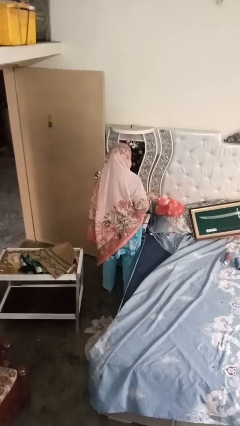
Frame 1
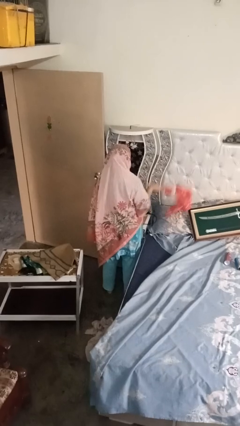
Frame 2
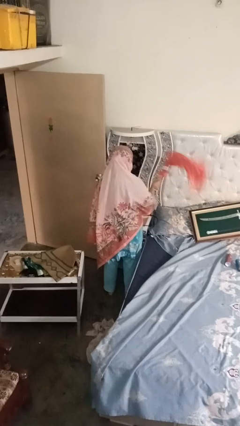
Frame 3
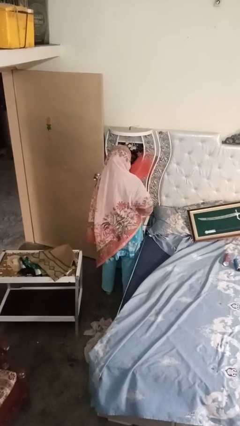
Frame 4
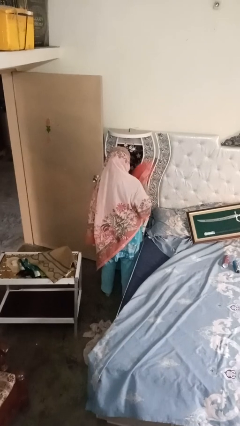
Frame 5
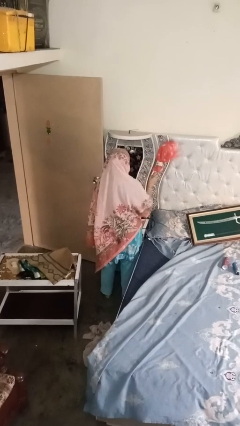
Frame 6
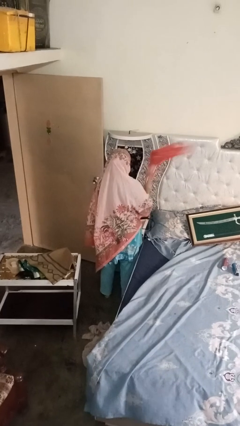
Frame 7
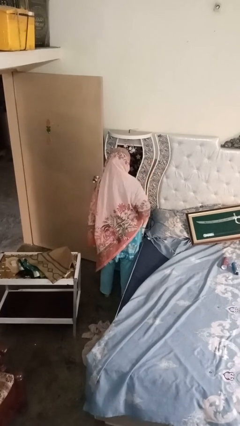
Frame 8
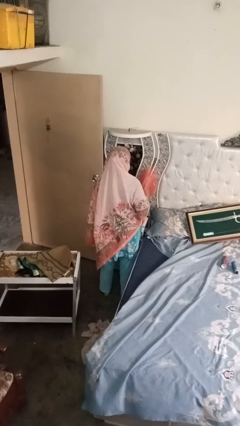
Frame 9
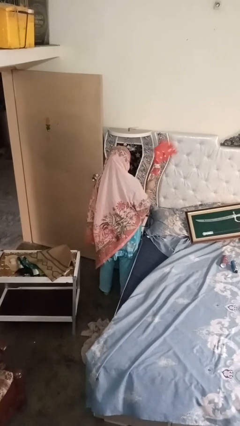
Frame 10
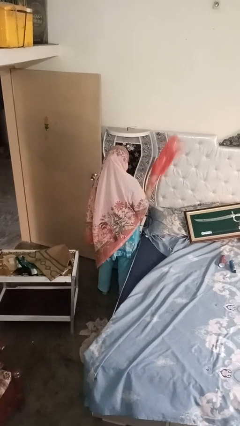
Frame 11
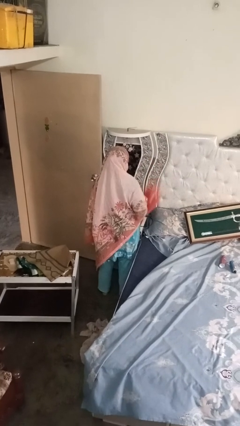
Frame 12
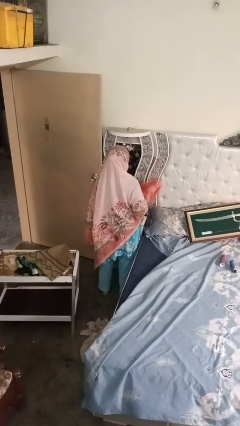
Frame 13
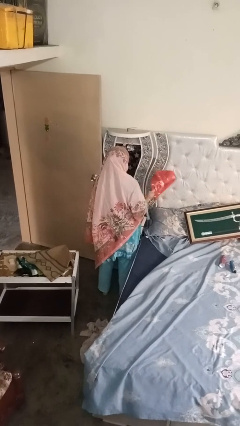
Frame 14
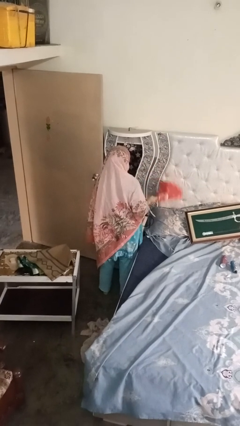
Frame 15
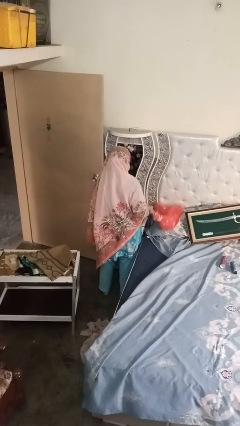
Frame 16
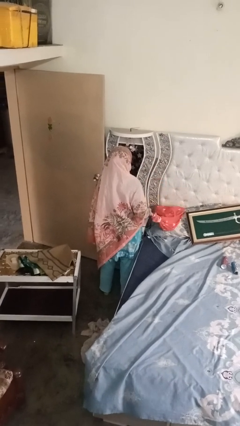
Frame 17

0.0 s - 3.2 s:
person dusts furniture

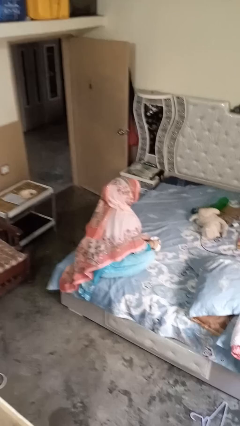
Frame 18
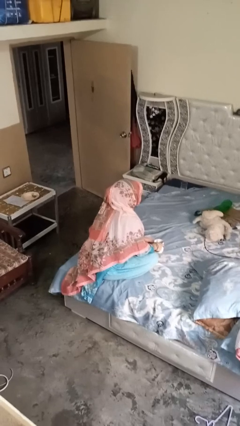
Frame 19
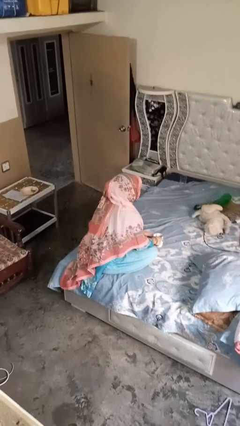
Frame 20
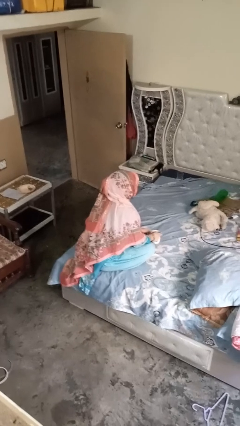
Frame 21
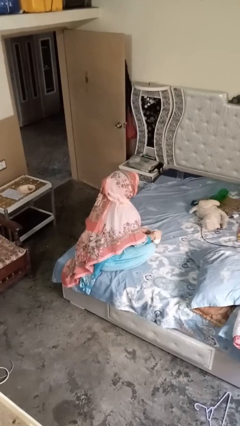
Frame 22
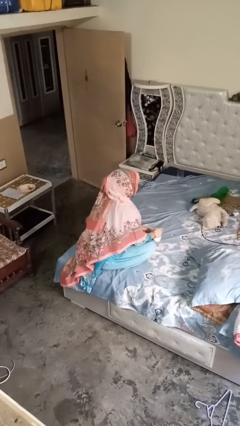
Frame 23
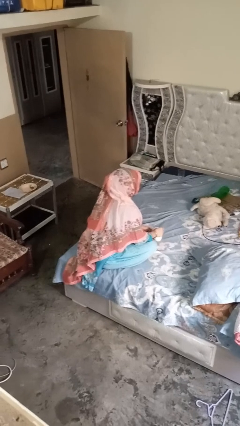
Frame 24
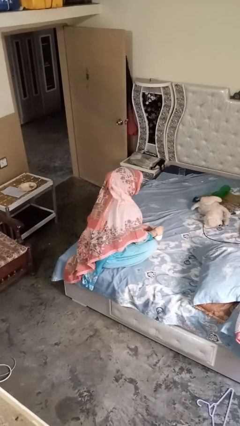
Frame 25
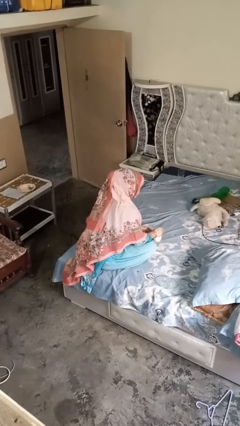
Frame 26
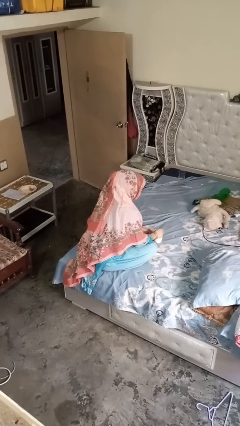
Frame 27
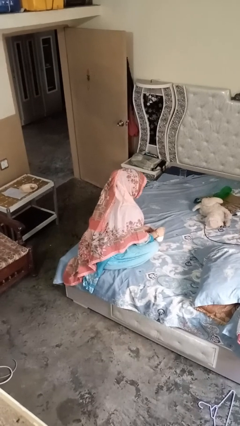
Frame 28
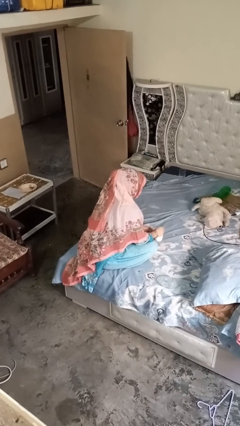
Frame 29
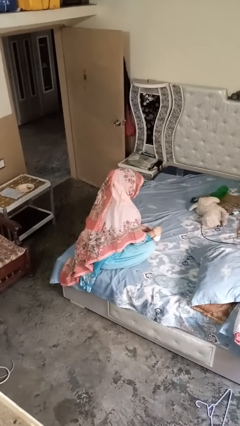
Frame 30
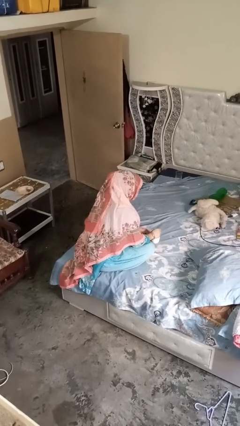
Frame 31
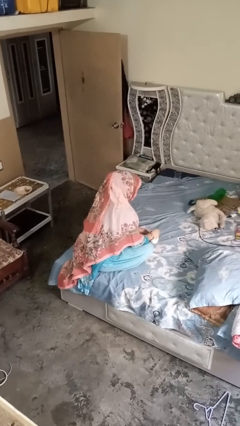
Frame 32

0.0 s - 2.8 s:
person stirs mug

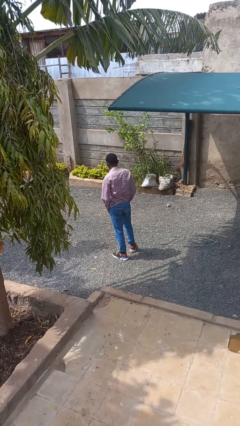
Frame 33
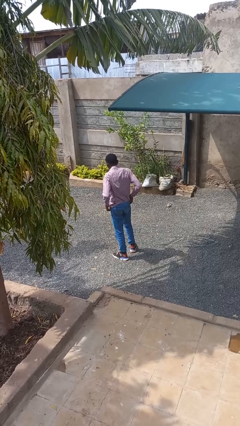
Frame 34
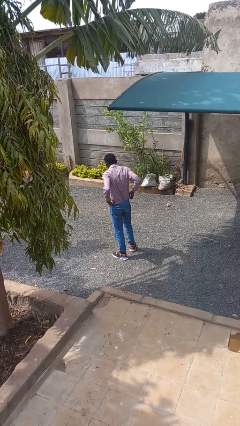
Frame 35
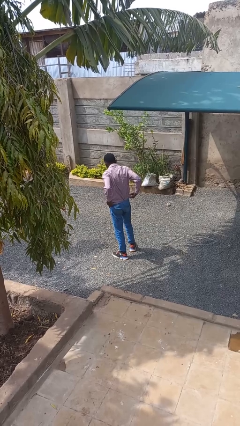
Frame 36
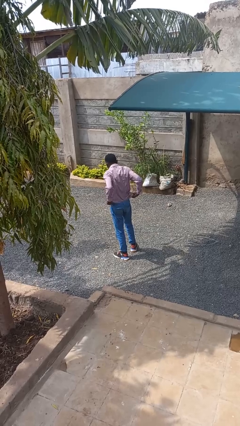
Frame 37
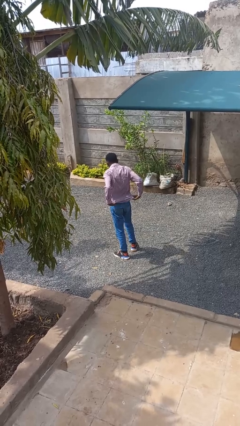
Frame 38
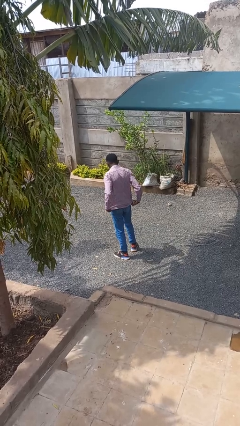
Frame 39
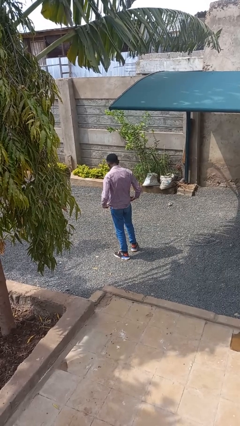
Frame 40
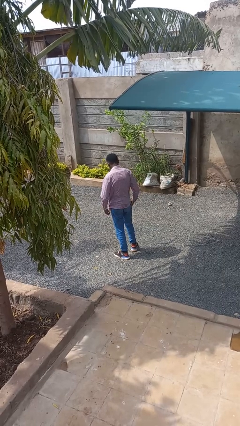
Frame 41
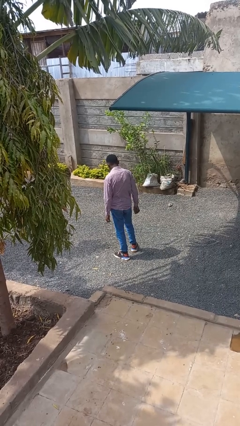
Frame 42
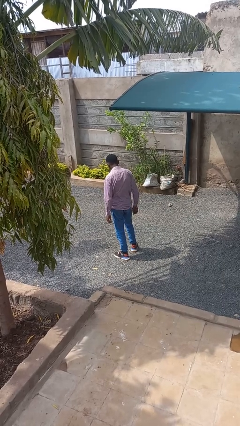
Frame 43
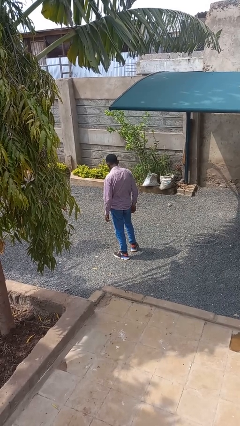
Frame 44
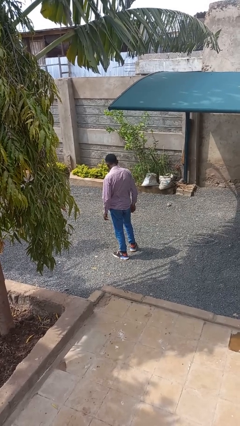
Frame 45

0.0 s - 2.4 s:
person untucks shirt

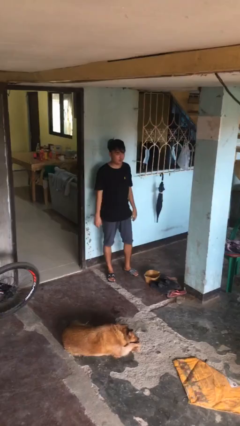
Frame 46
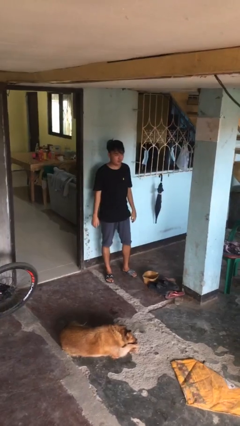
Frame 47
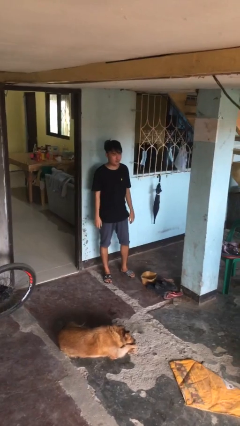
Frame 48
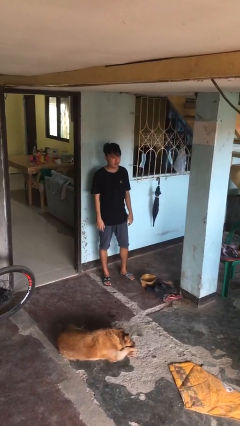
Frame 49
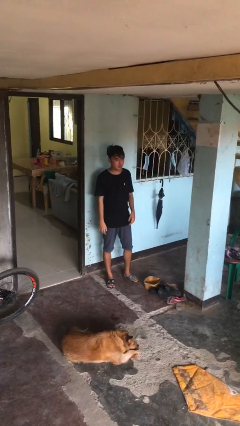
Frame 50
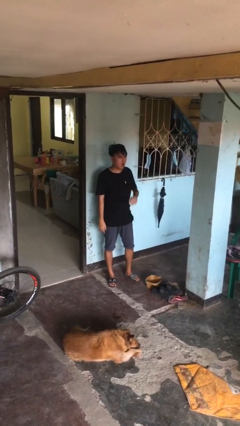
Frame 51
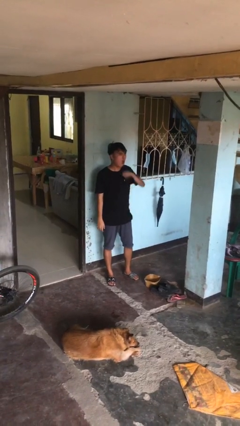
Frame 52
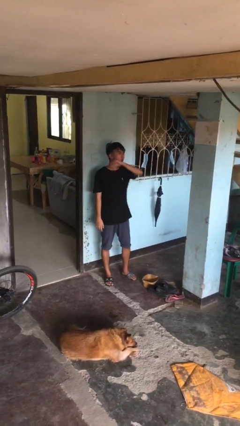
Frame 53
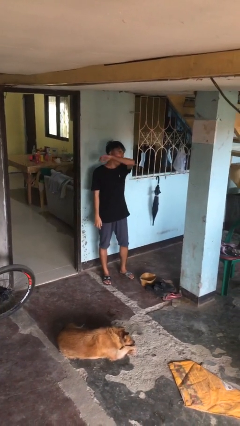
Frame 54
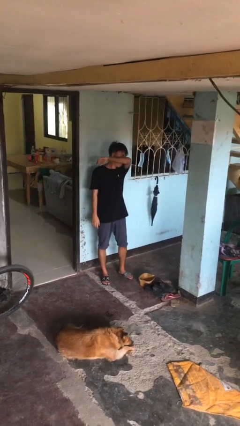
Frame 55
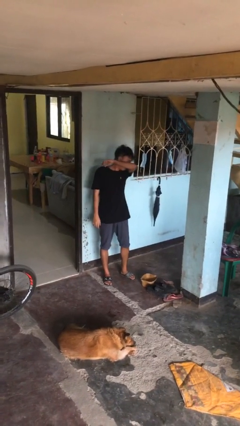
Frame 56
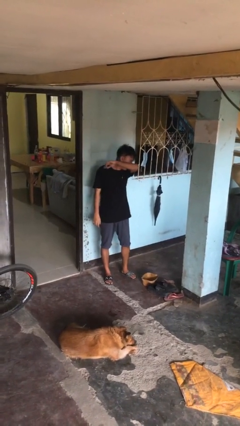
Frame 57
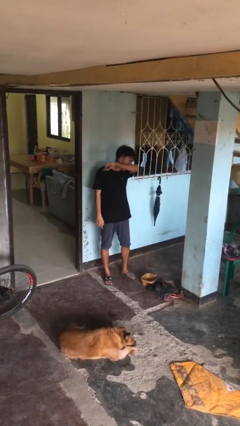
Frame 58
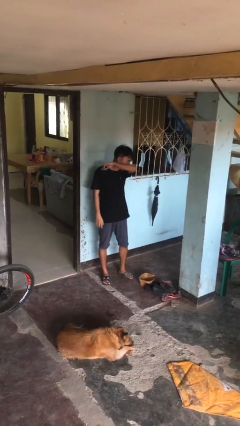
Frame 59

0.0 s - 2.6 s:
person sneezes into arm

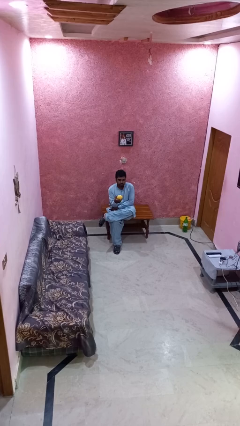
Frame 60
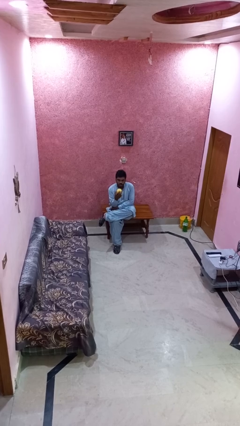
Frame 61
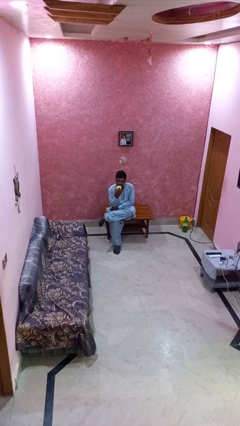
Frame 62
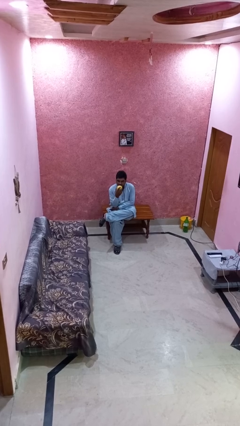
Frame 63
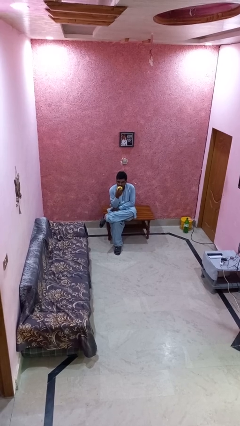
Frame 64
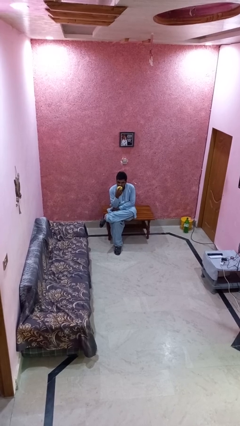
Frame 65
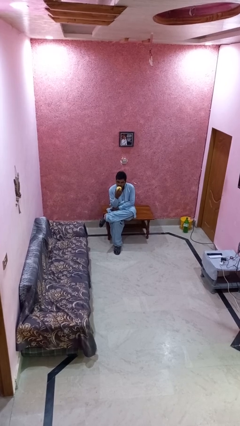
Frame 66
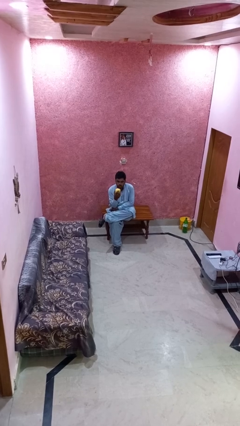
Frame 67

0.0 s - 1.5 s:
person eats apple

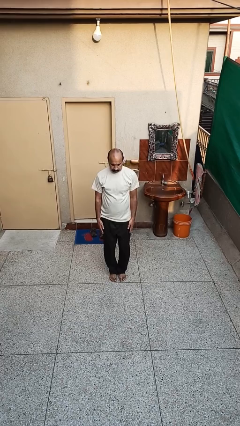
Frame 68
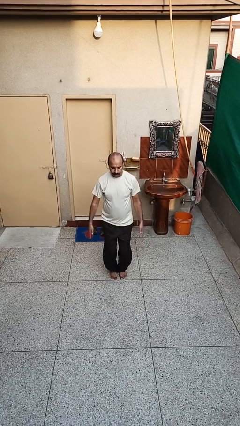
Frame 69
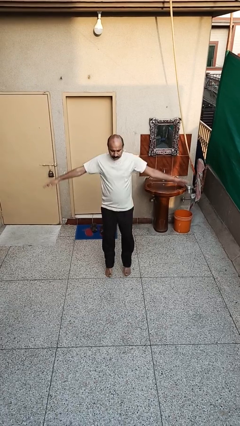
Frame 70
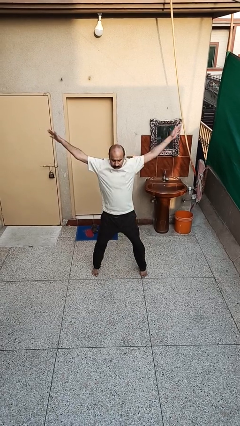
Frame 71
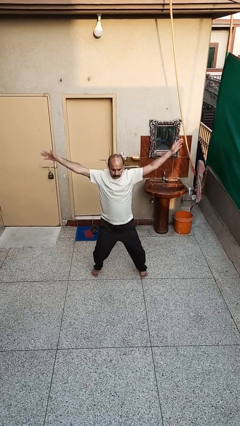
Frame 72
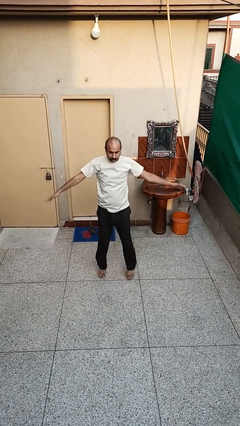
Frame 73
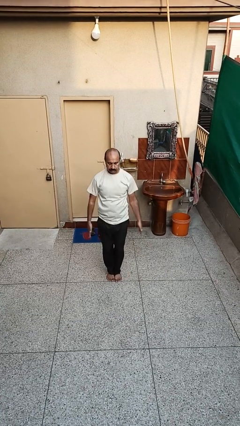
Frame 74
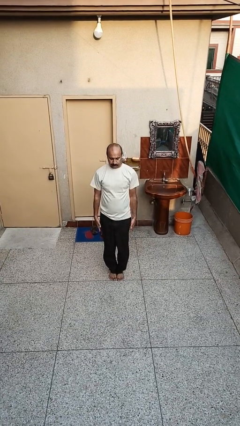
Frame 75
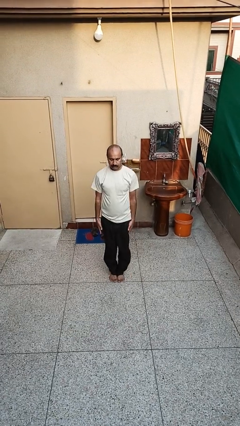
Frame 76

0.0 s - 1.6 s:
person exercises with jumping jacks

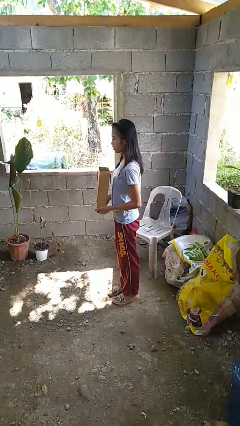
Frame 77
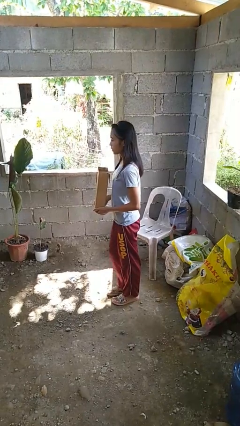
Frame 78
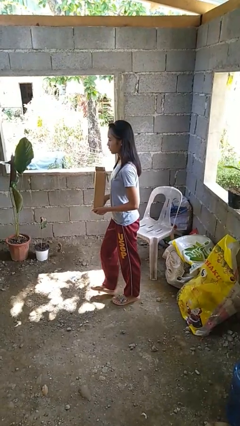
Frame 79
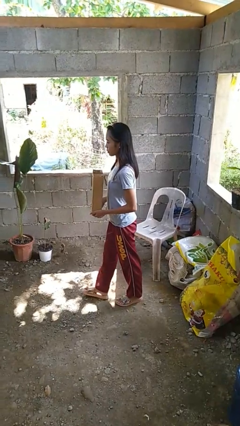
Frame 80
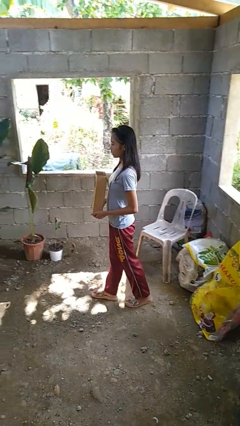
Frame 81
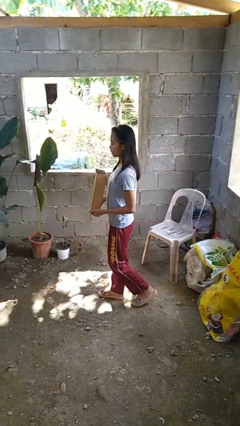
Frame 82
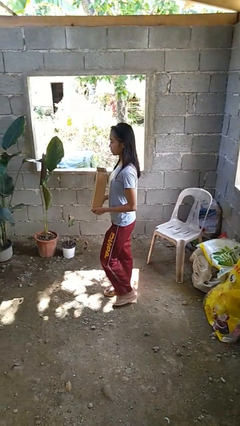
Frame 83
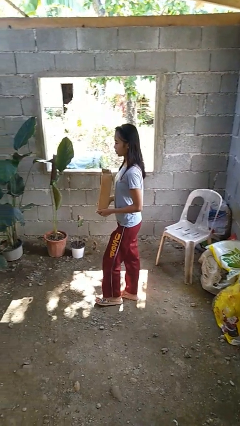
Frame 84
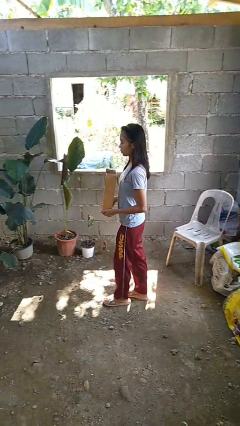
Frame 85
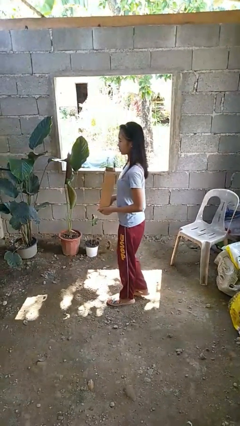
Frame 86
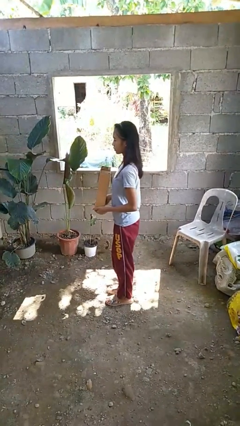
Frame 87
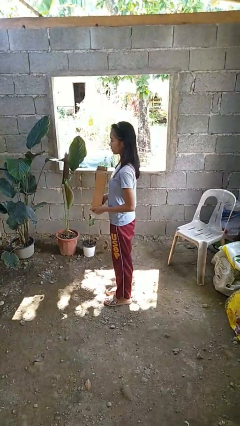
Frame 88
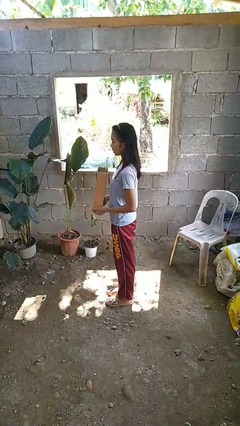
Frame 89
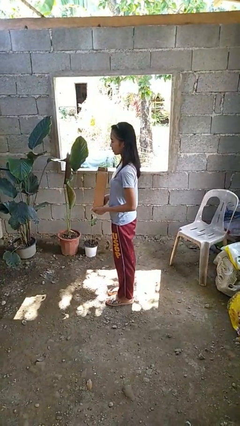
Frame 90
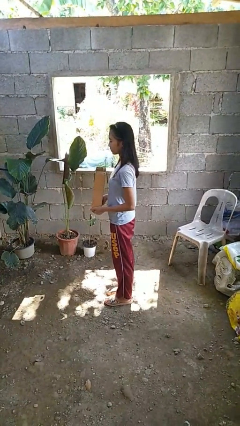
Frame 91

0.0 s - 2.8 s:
person carries groceries

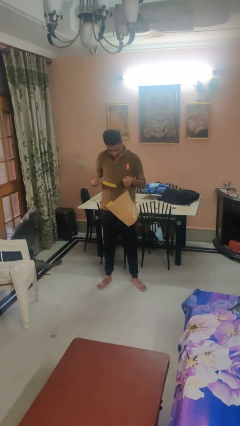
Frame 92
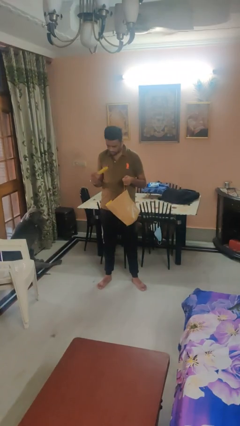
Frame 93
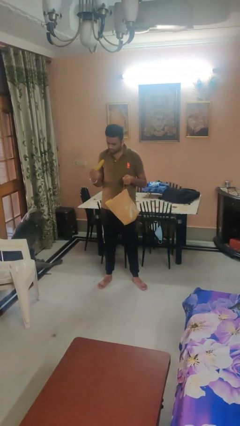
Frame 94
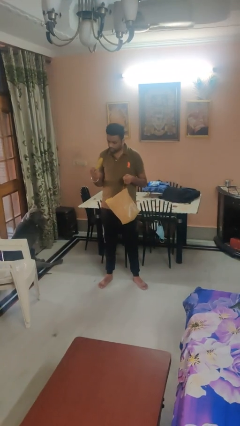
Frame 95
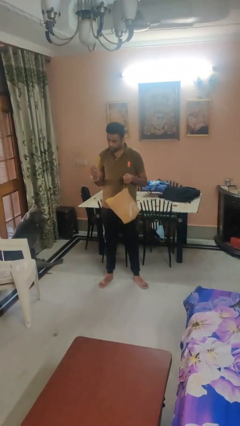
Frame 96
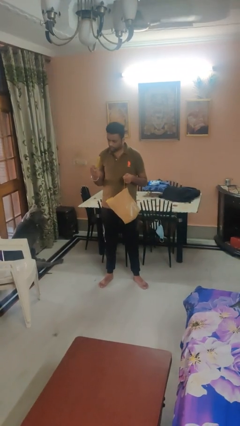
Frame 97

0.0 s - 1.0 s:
person takes object from bag
